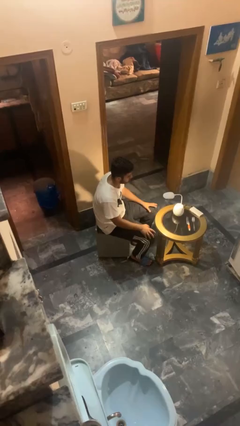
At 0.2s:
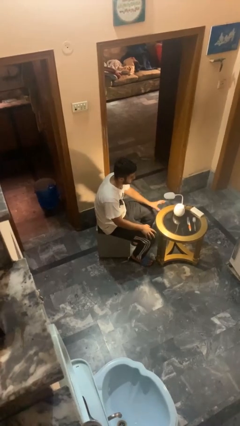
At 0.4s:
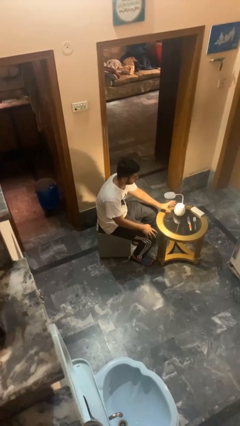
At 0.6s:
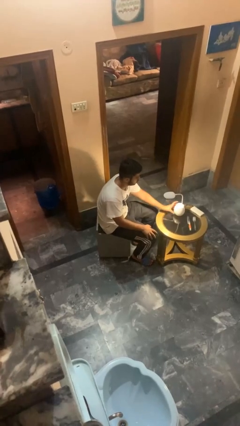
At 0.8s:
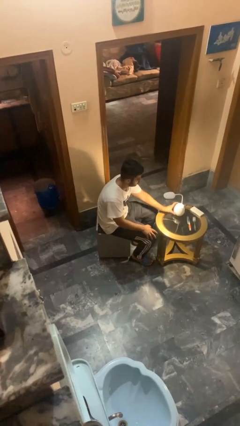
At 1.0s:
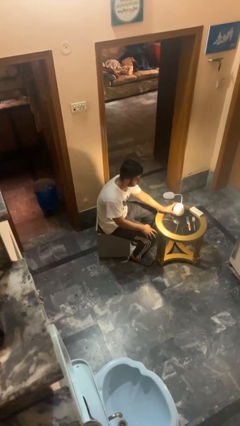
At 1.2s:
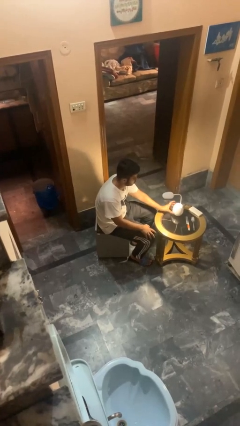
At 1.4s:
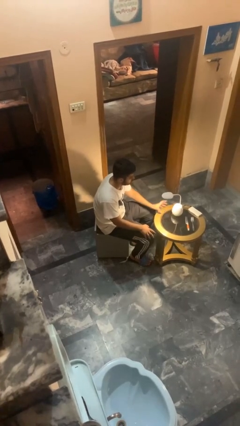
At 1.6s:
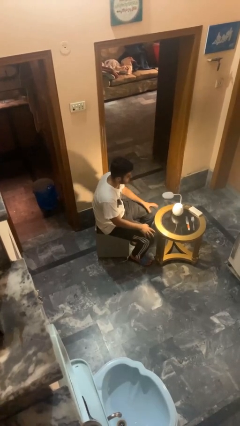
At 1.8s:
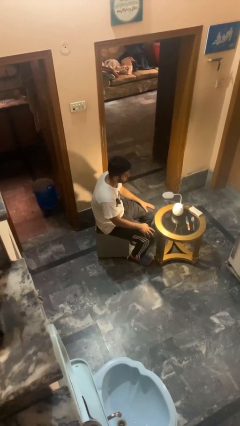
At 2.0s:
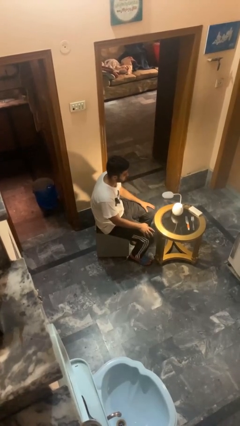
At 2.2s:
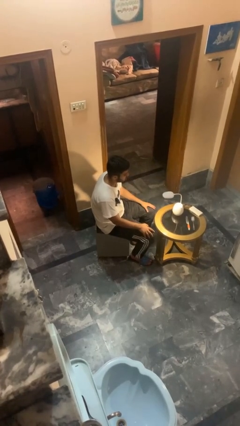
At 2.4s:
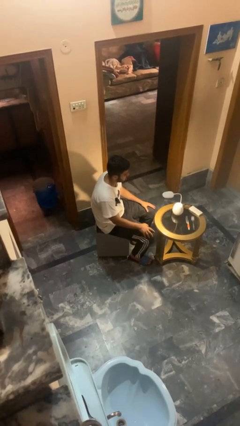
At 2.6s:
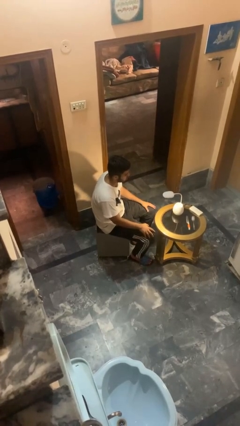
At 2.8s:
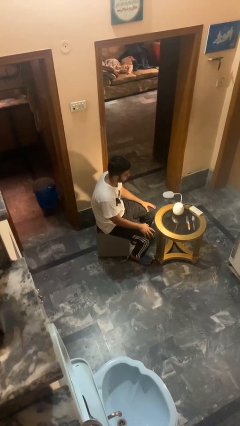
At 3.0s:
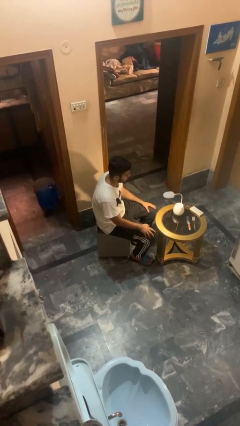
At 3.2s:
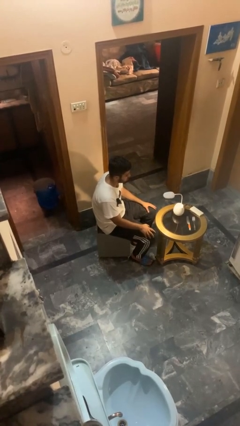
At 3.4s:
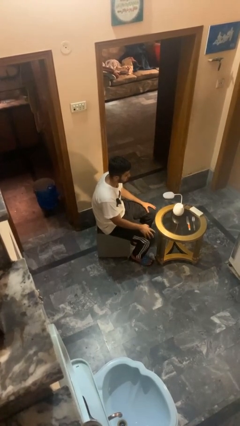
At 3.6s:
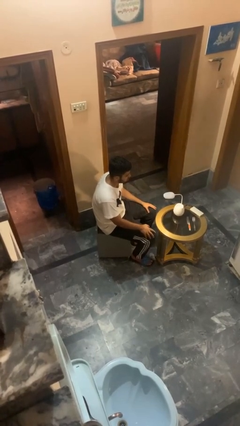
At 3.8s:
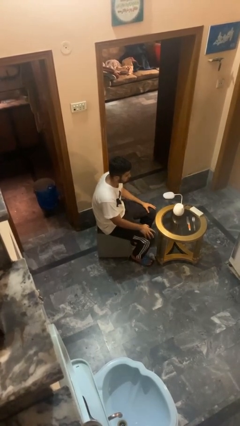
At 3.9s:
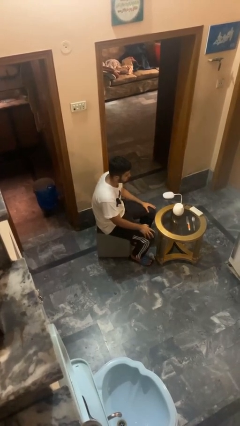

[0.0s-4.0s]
person turns off lamp

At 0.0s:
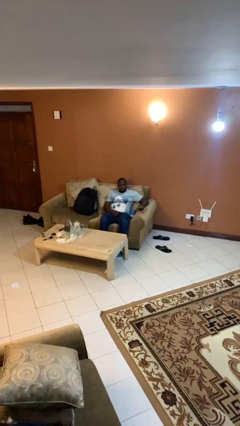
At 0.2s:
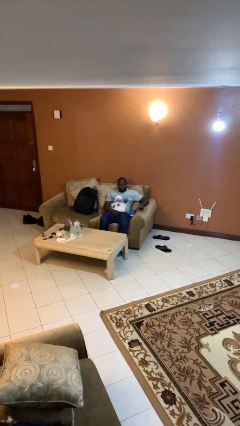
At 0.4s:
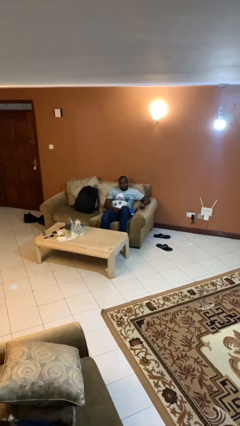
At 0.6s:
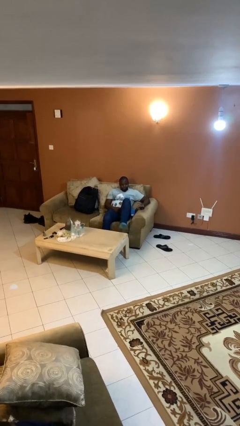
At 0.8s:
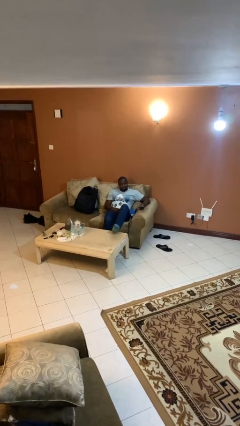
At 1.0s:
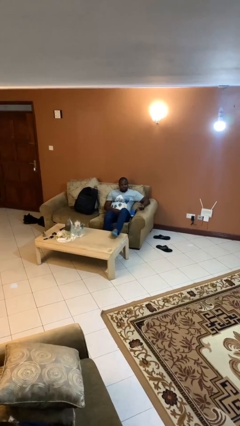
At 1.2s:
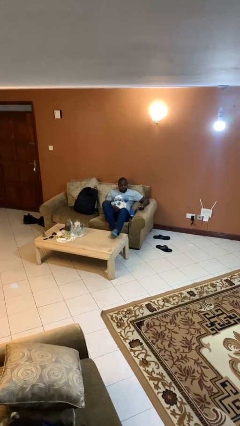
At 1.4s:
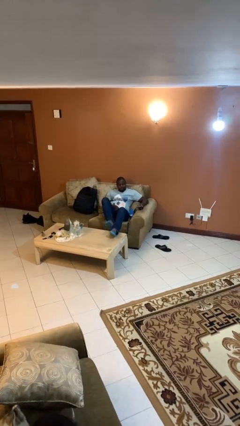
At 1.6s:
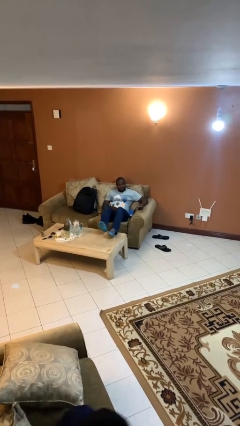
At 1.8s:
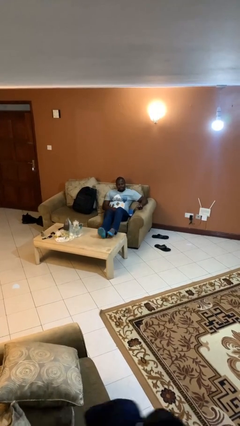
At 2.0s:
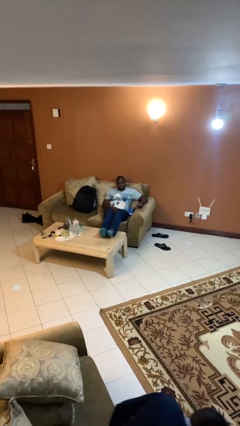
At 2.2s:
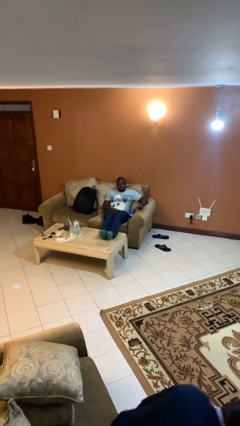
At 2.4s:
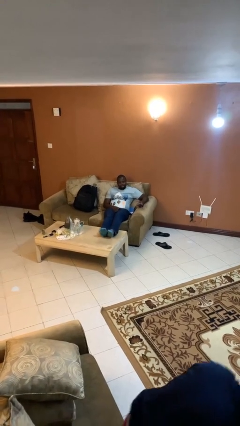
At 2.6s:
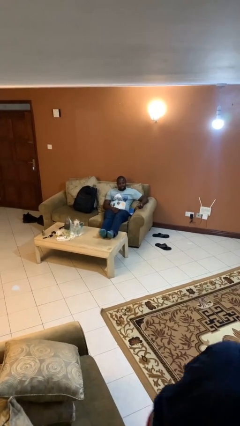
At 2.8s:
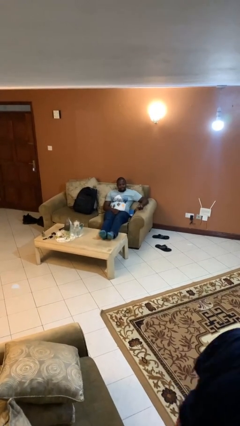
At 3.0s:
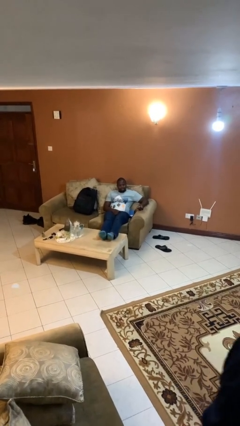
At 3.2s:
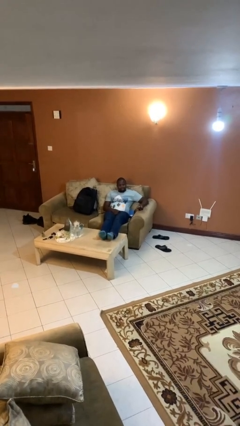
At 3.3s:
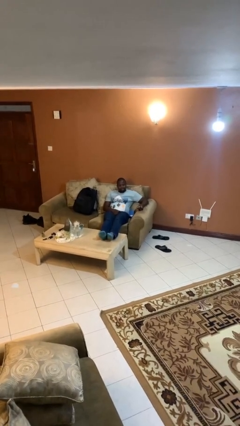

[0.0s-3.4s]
person puts feet up

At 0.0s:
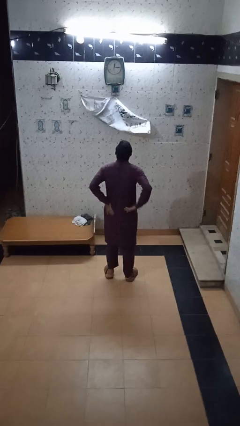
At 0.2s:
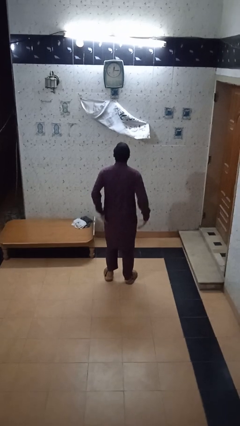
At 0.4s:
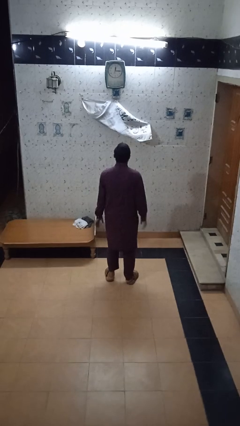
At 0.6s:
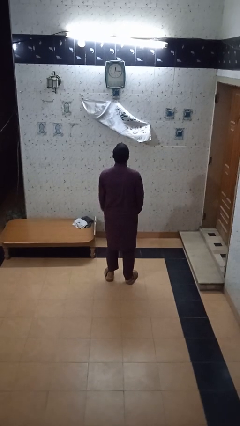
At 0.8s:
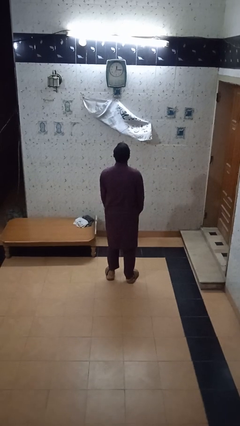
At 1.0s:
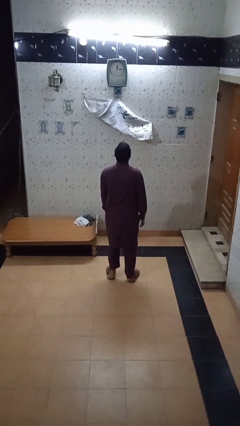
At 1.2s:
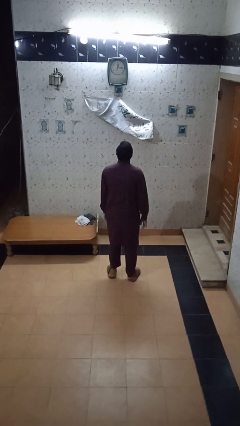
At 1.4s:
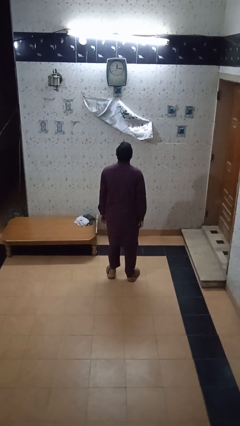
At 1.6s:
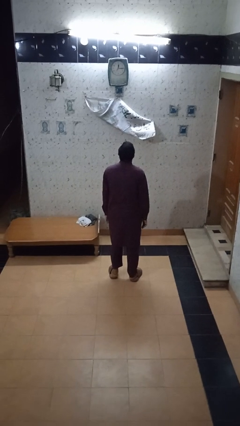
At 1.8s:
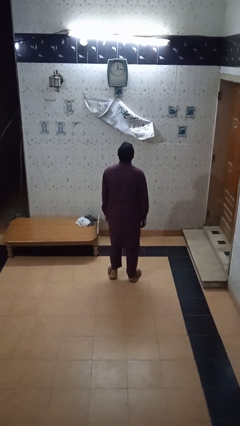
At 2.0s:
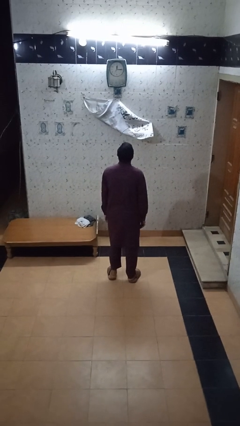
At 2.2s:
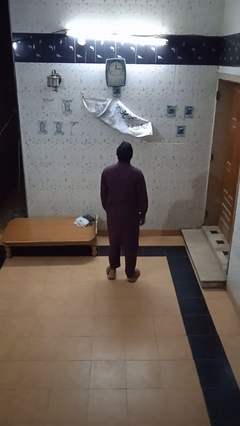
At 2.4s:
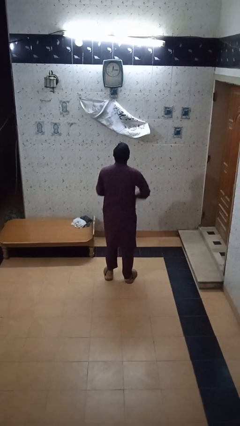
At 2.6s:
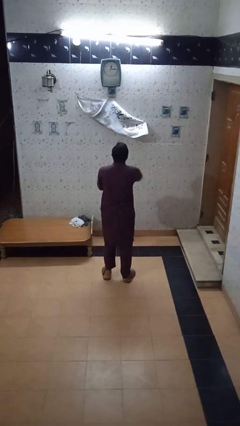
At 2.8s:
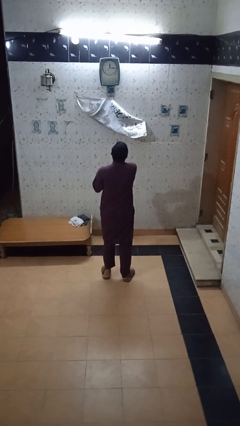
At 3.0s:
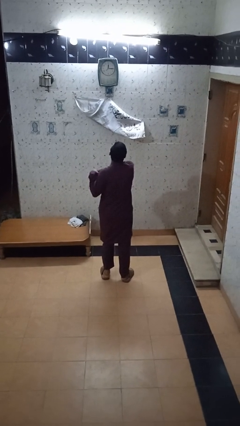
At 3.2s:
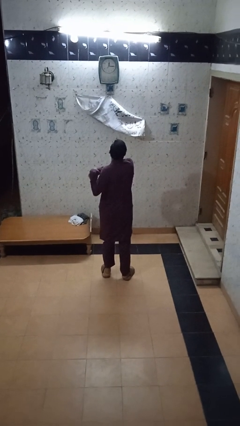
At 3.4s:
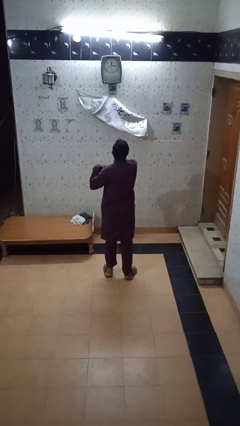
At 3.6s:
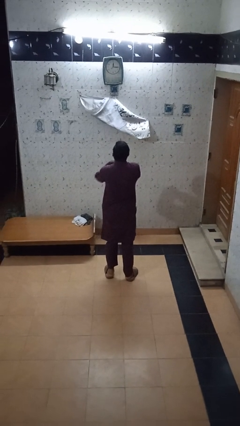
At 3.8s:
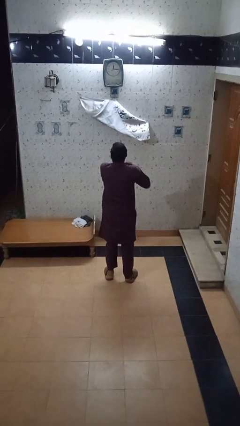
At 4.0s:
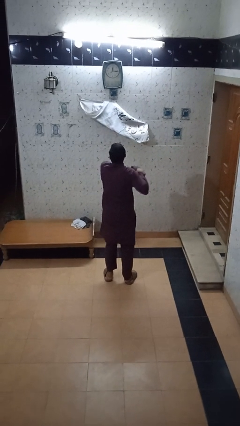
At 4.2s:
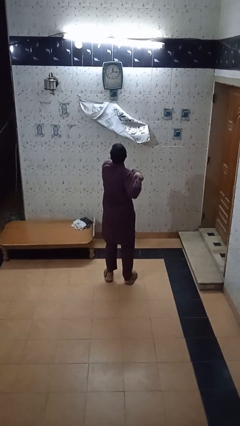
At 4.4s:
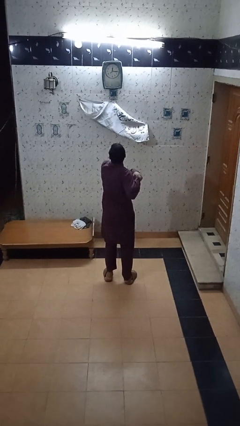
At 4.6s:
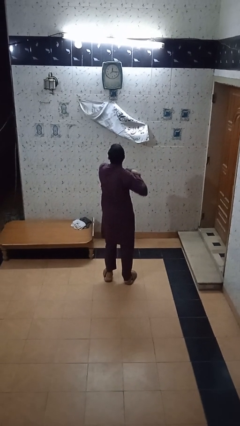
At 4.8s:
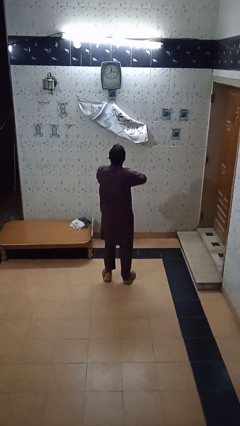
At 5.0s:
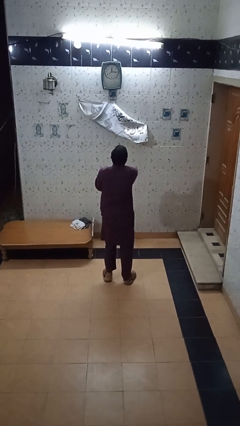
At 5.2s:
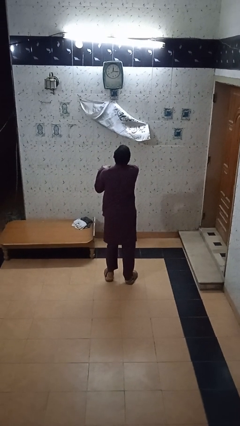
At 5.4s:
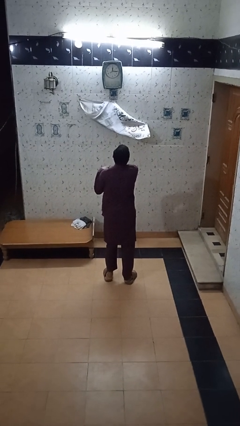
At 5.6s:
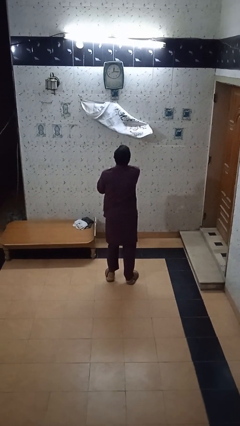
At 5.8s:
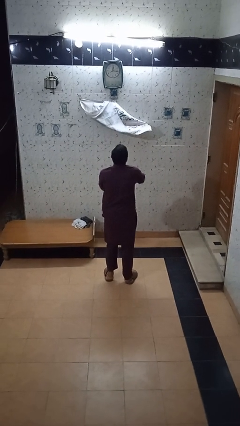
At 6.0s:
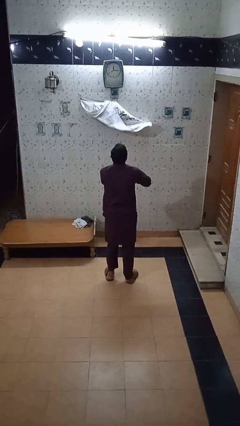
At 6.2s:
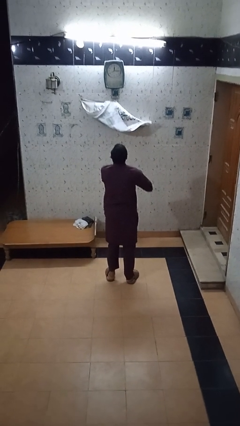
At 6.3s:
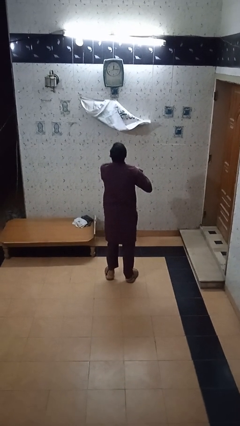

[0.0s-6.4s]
person stretches arms to side

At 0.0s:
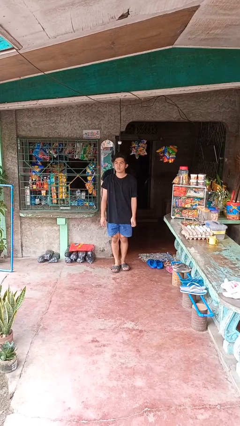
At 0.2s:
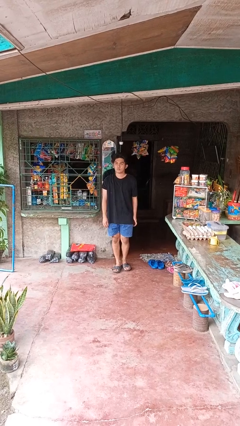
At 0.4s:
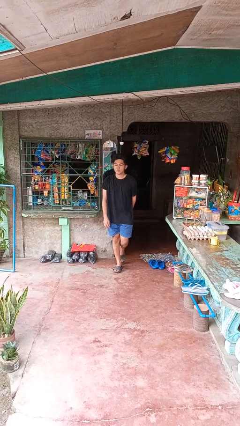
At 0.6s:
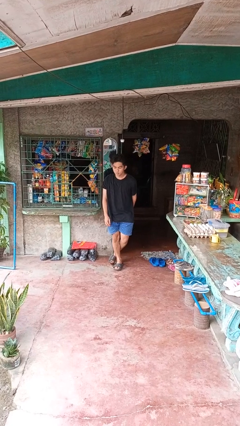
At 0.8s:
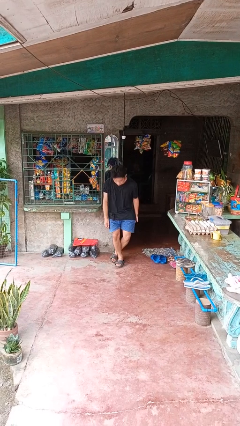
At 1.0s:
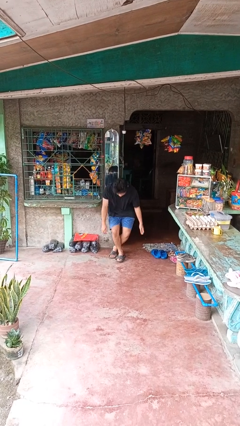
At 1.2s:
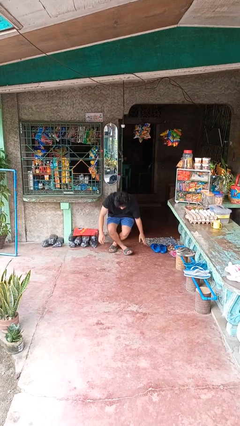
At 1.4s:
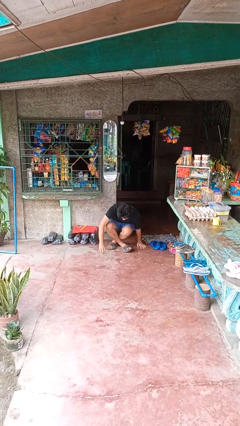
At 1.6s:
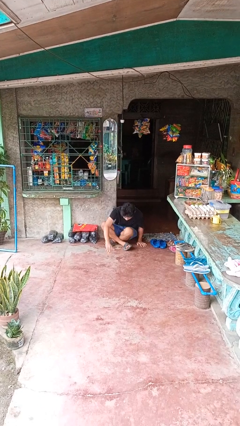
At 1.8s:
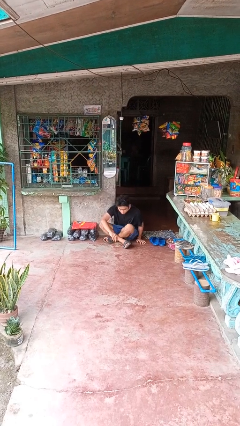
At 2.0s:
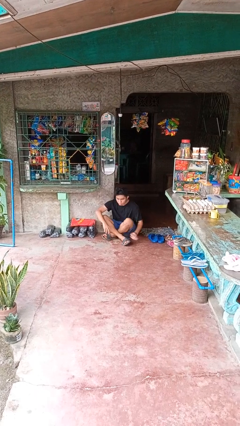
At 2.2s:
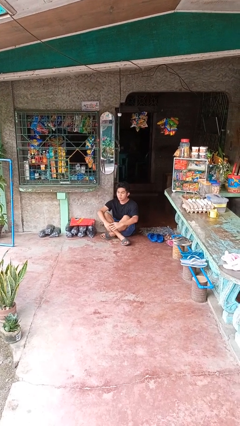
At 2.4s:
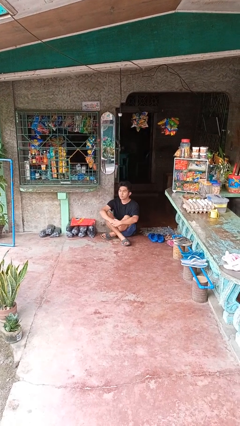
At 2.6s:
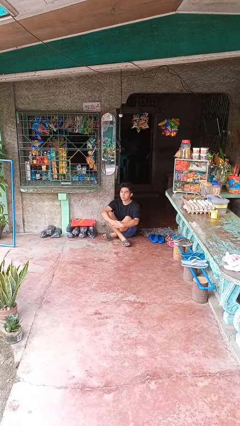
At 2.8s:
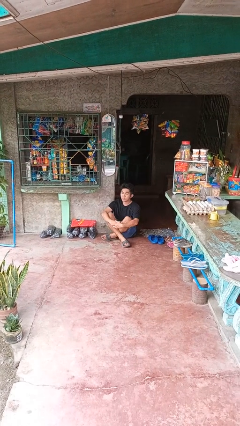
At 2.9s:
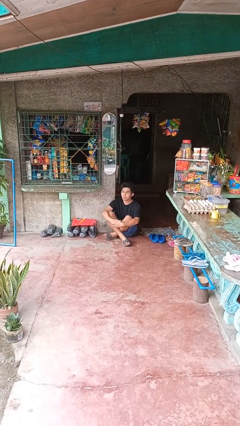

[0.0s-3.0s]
person sits crisscross

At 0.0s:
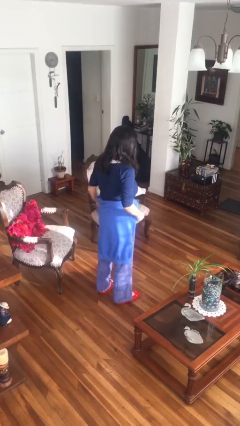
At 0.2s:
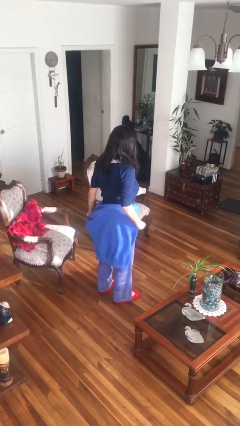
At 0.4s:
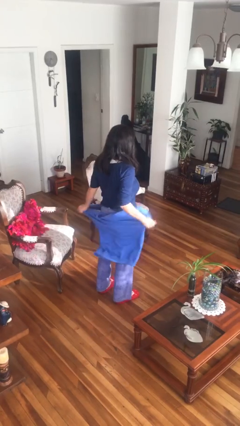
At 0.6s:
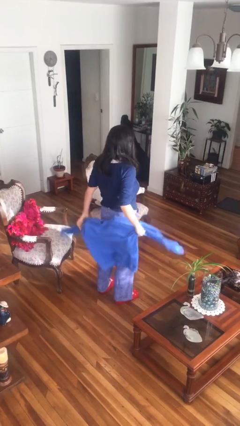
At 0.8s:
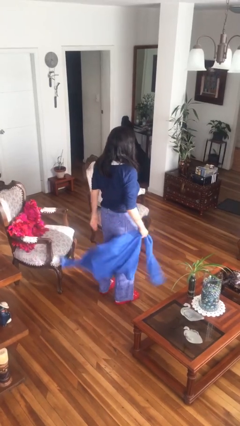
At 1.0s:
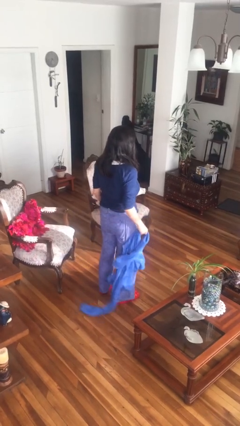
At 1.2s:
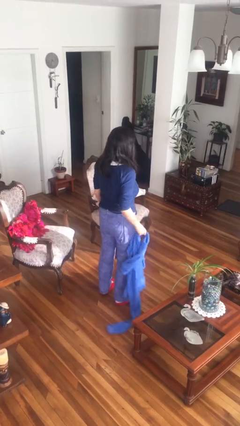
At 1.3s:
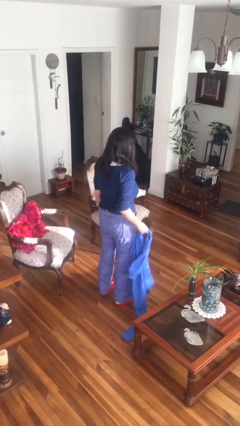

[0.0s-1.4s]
person unties jacket around waist
